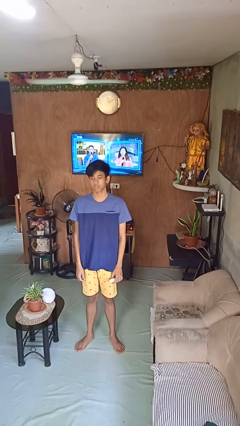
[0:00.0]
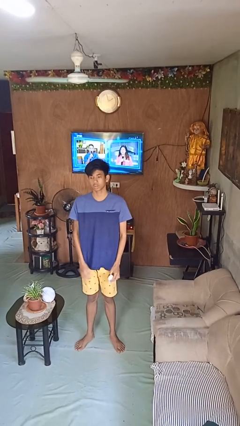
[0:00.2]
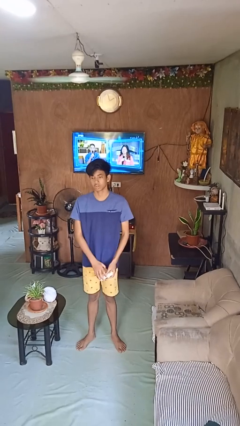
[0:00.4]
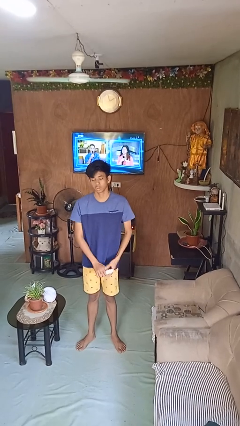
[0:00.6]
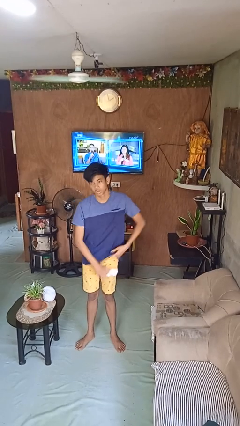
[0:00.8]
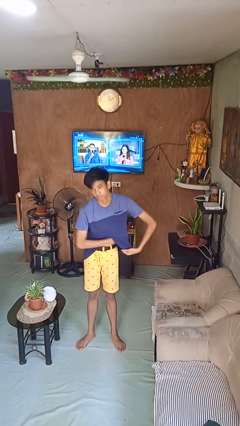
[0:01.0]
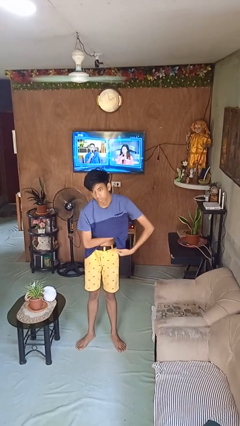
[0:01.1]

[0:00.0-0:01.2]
person applies deodorant

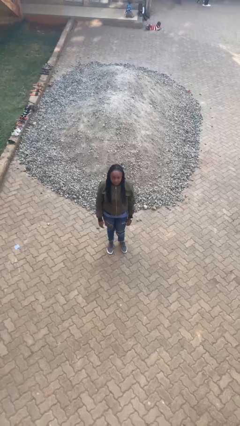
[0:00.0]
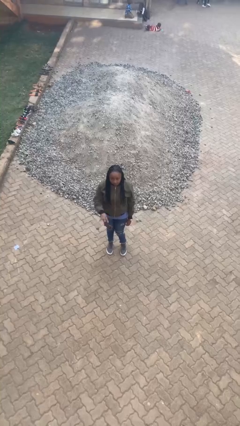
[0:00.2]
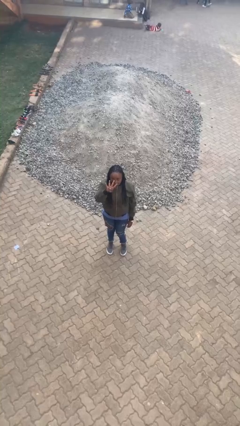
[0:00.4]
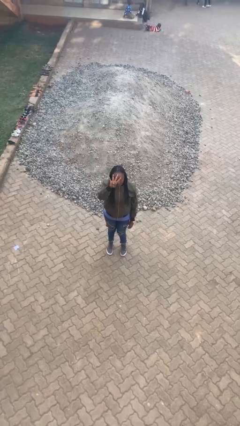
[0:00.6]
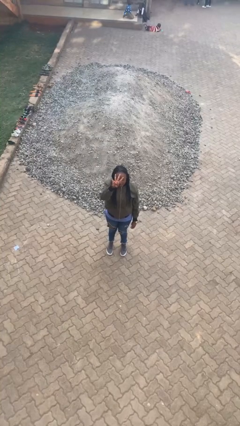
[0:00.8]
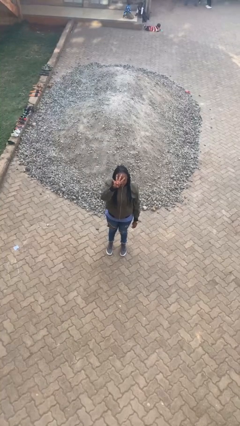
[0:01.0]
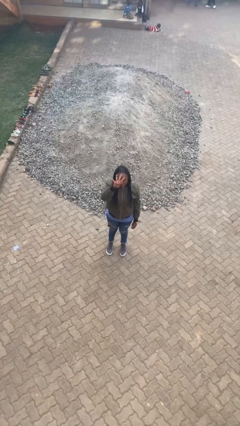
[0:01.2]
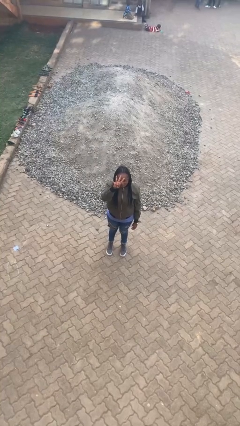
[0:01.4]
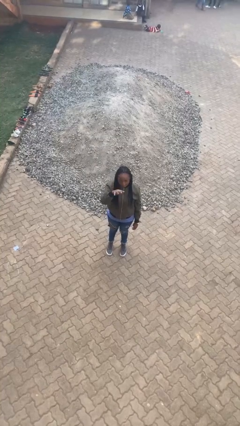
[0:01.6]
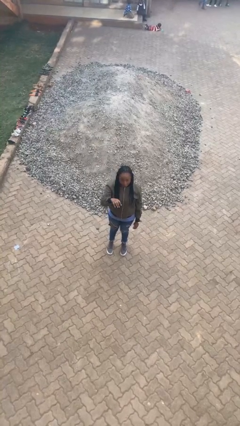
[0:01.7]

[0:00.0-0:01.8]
person gestures number four

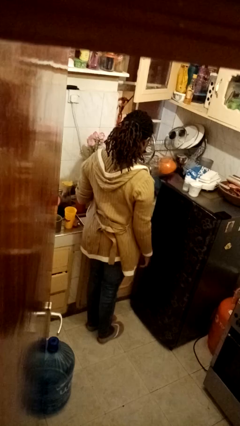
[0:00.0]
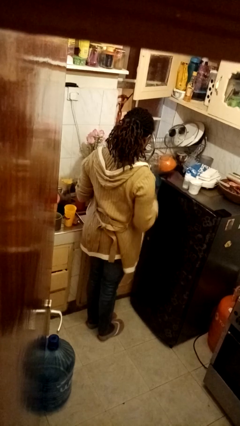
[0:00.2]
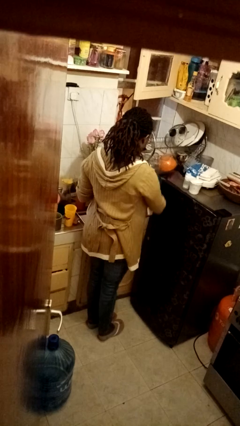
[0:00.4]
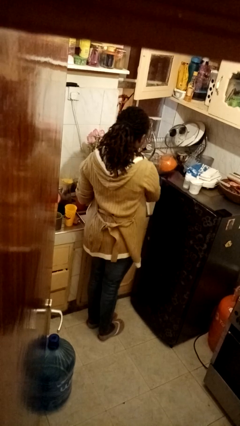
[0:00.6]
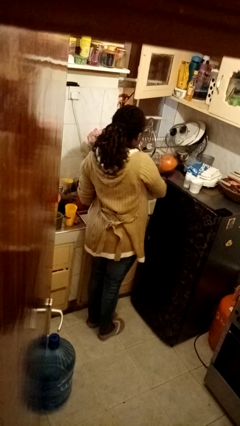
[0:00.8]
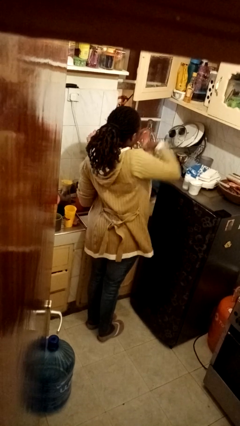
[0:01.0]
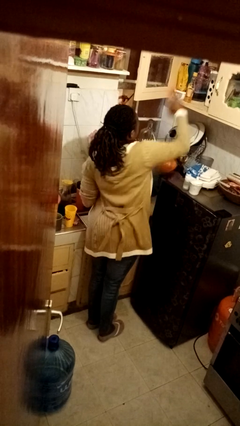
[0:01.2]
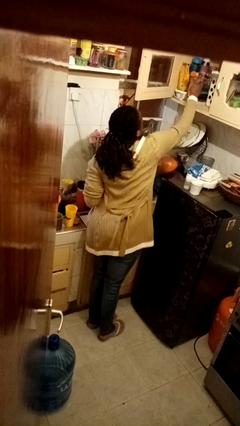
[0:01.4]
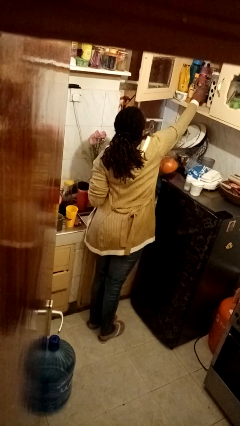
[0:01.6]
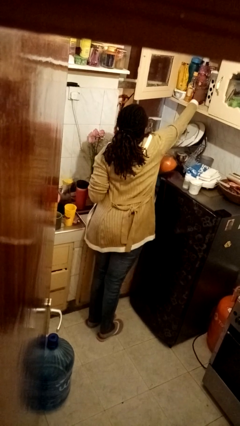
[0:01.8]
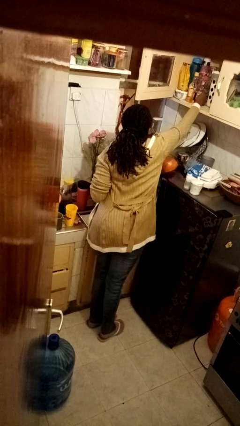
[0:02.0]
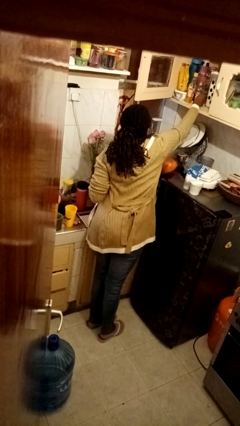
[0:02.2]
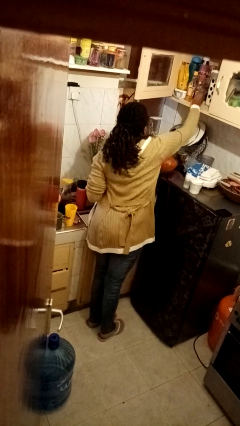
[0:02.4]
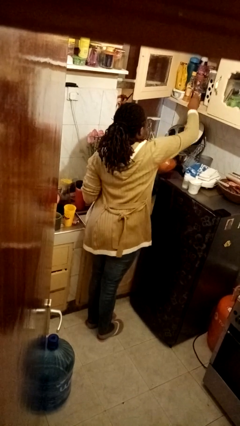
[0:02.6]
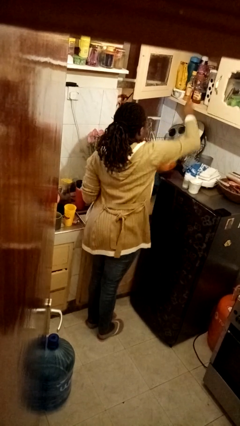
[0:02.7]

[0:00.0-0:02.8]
person loads groceries into cabinet

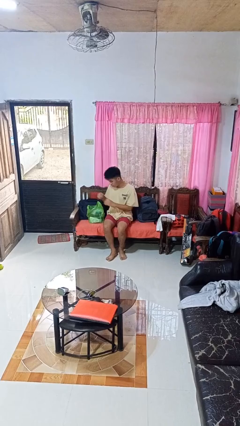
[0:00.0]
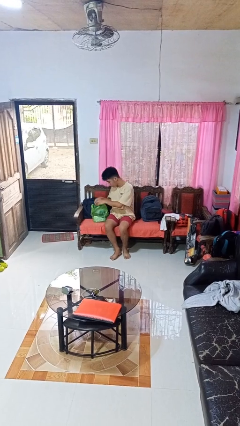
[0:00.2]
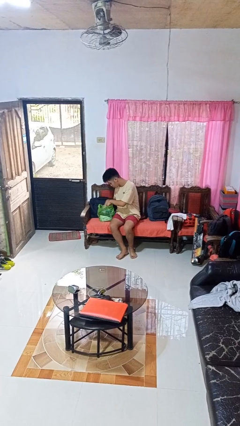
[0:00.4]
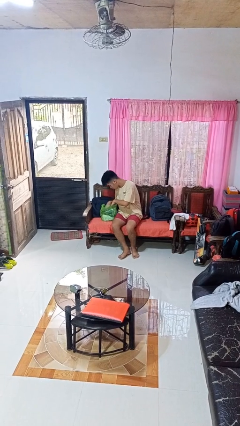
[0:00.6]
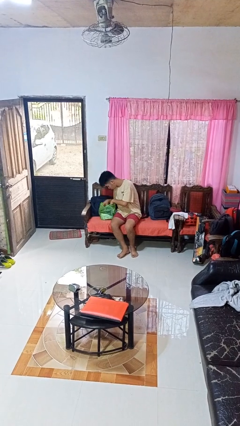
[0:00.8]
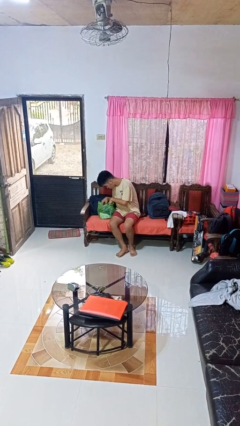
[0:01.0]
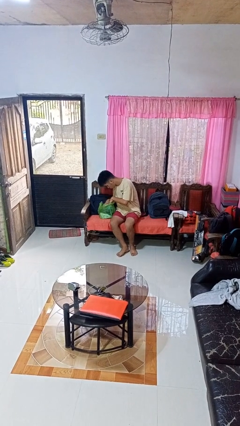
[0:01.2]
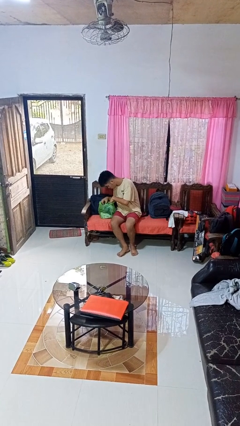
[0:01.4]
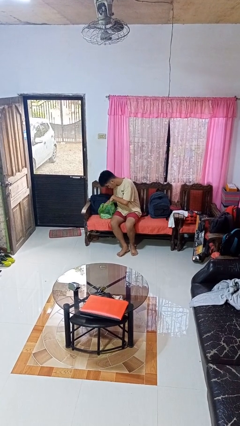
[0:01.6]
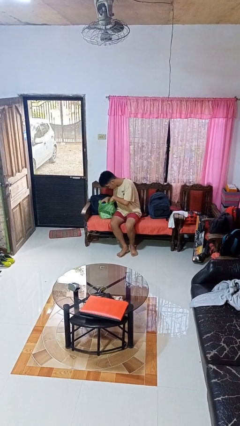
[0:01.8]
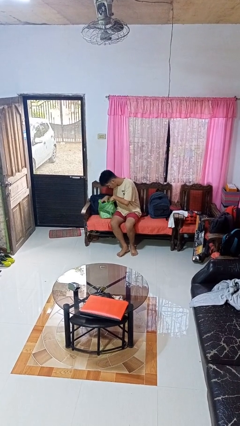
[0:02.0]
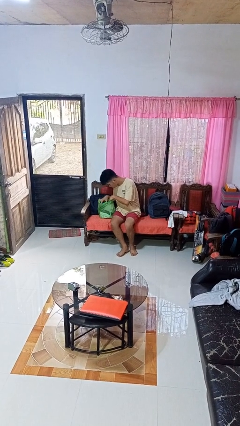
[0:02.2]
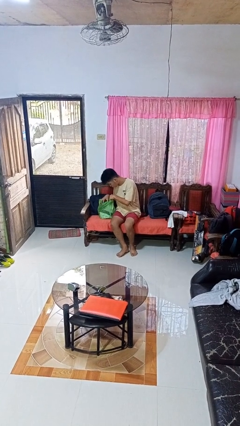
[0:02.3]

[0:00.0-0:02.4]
person searches in bag

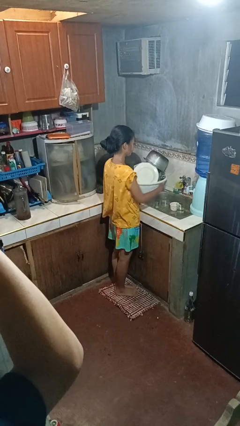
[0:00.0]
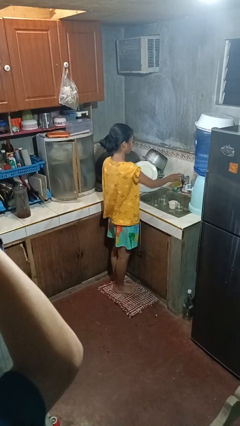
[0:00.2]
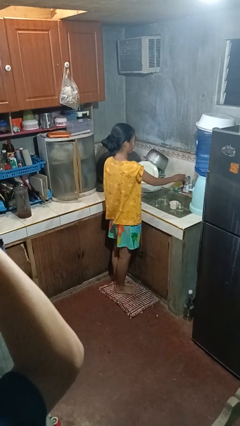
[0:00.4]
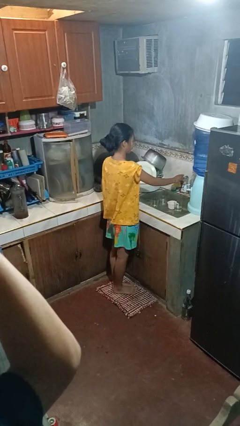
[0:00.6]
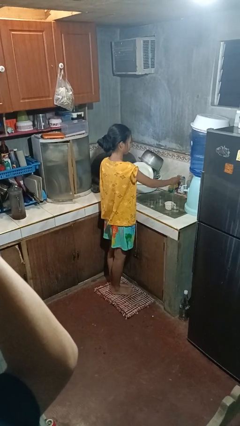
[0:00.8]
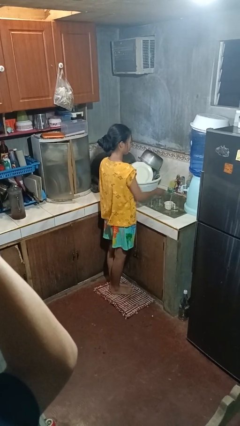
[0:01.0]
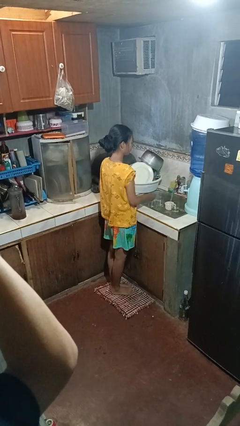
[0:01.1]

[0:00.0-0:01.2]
person turns on faucet

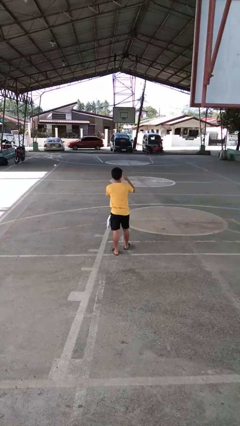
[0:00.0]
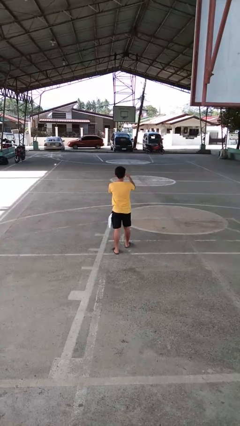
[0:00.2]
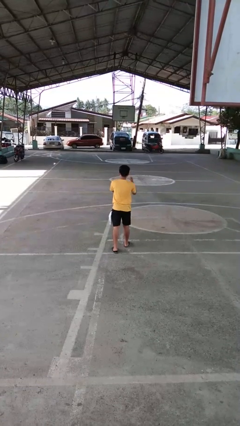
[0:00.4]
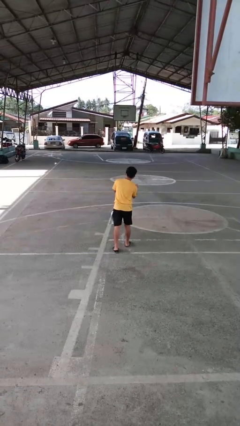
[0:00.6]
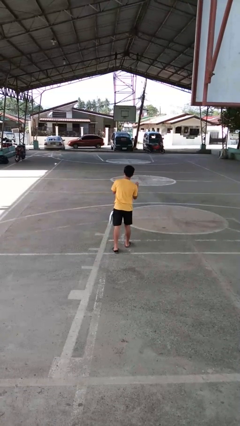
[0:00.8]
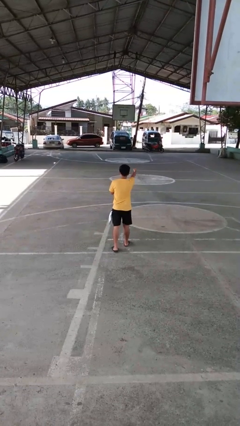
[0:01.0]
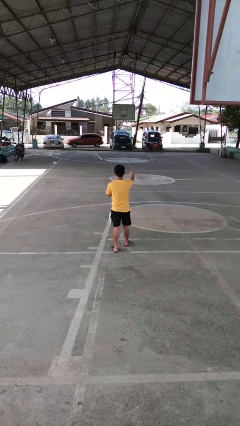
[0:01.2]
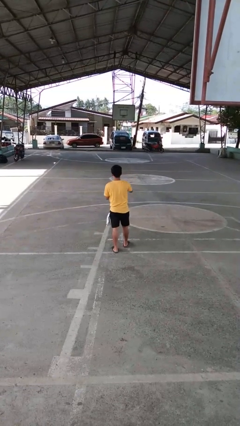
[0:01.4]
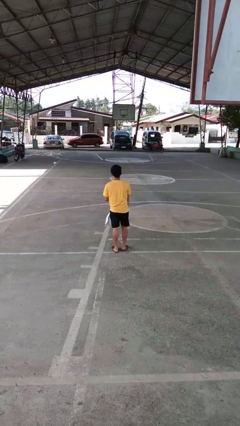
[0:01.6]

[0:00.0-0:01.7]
person punches

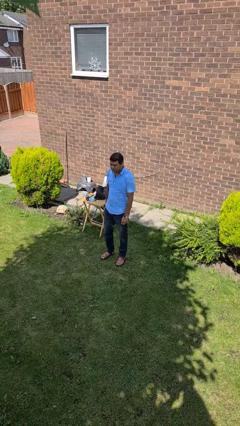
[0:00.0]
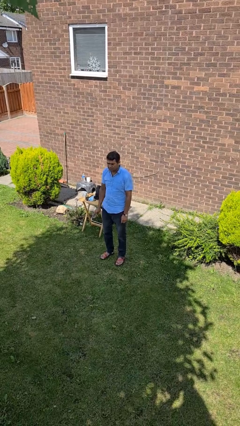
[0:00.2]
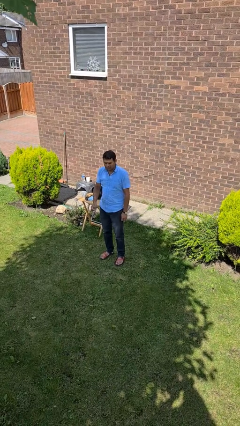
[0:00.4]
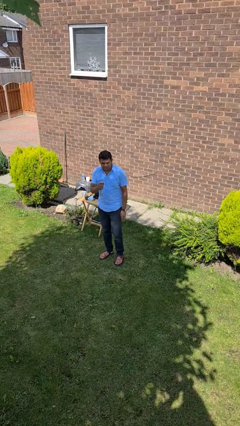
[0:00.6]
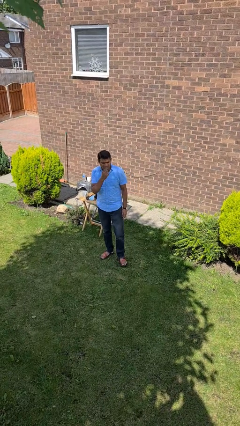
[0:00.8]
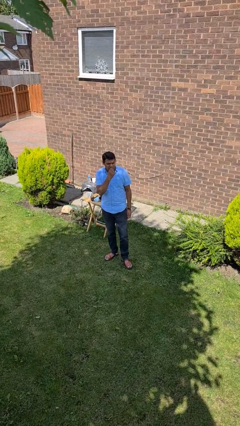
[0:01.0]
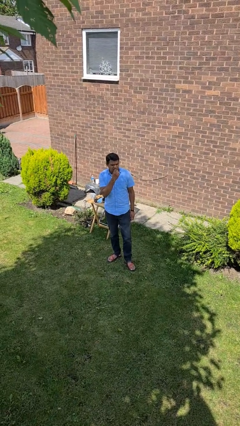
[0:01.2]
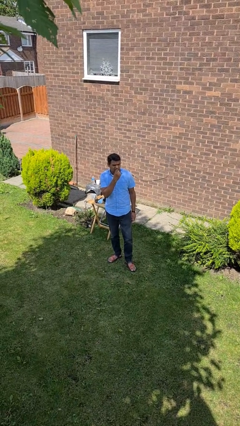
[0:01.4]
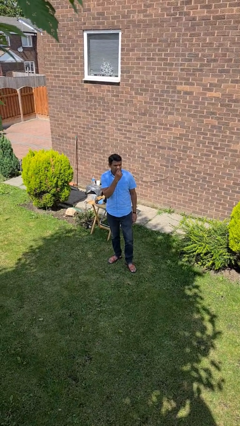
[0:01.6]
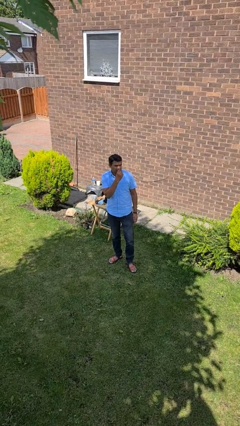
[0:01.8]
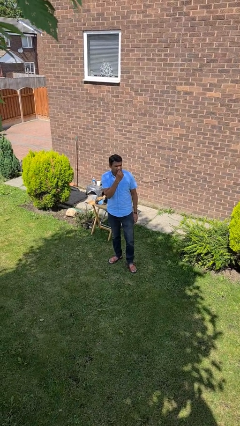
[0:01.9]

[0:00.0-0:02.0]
person flosses

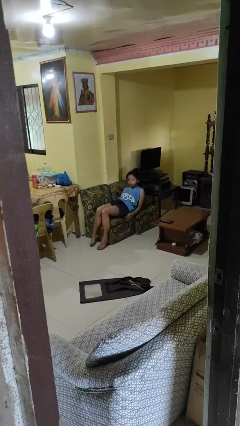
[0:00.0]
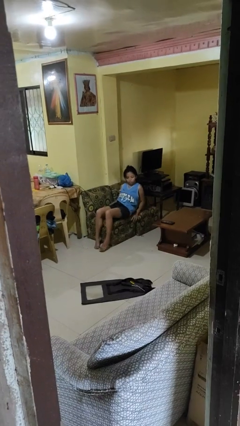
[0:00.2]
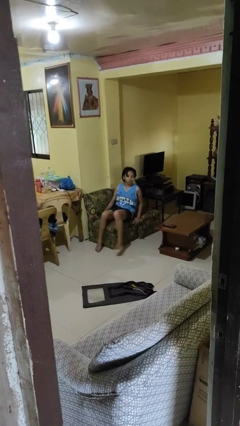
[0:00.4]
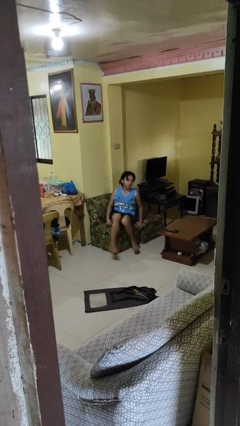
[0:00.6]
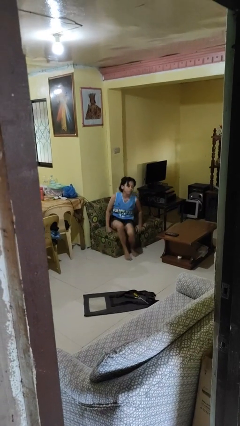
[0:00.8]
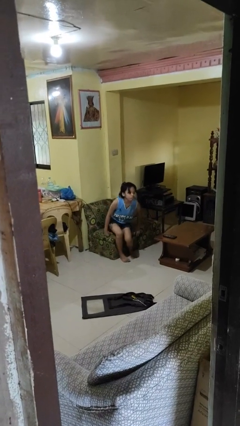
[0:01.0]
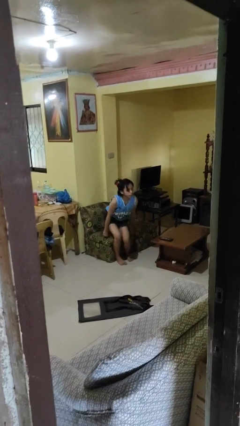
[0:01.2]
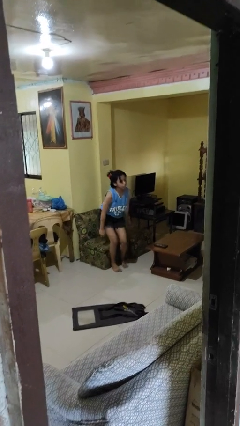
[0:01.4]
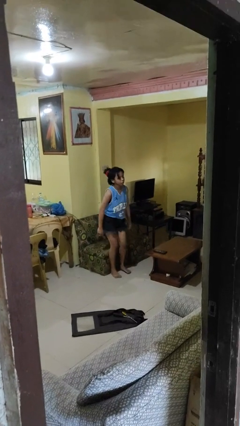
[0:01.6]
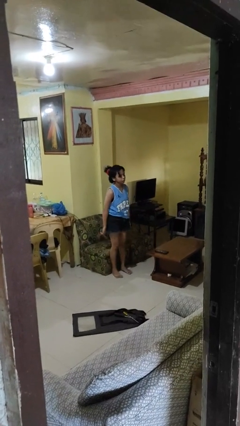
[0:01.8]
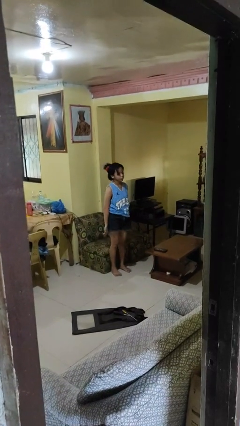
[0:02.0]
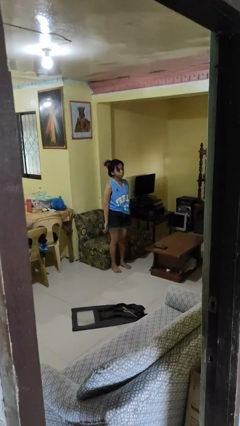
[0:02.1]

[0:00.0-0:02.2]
person stands up

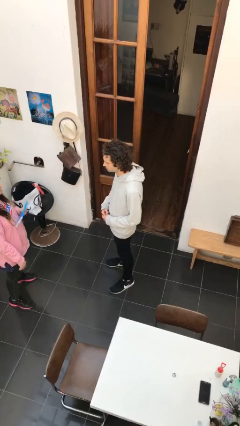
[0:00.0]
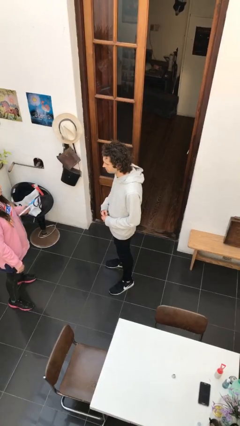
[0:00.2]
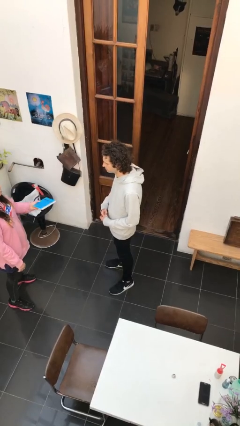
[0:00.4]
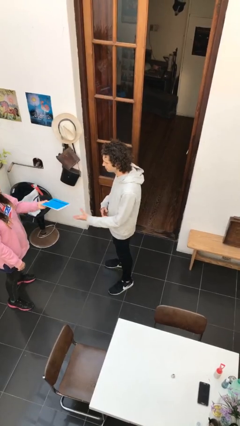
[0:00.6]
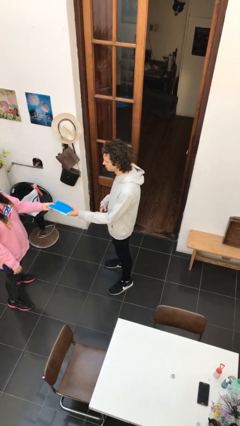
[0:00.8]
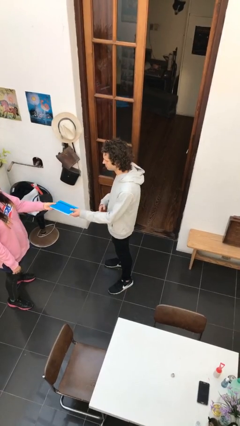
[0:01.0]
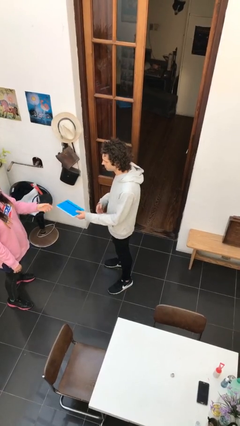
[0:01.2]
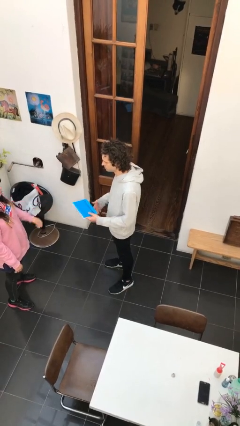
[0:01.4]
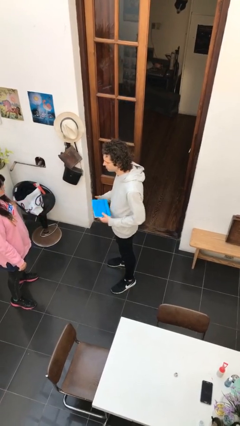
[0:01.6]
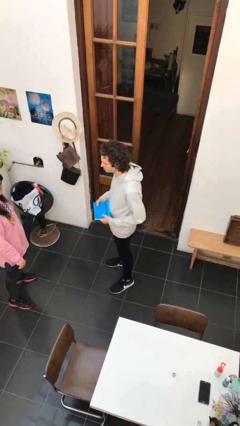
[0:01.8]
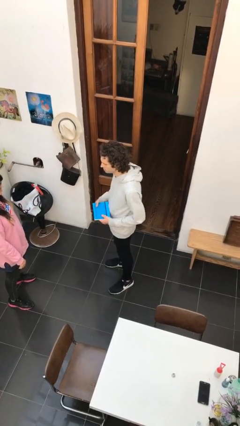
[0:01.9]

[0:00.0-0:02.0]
person transfers object to person
